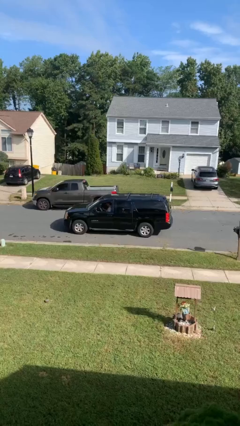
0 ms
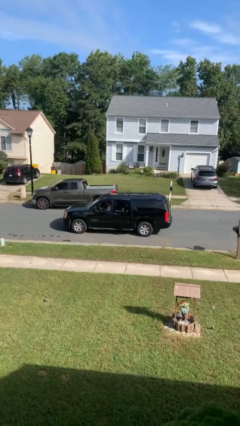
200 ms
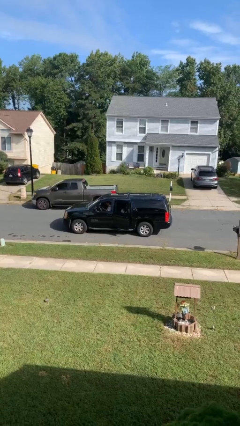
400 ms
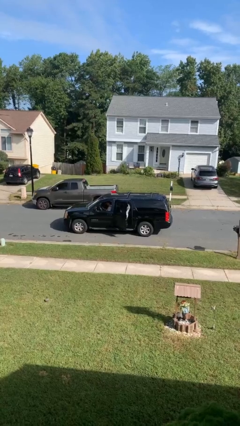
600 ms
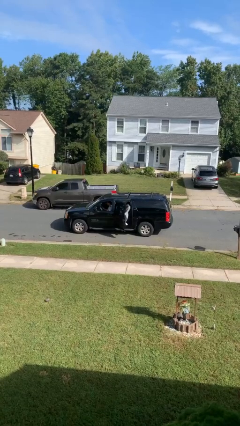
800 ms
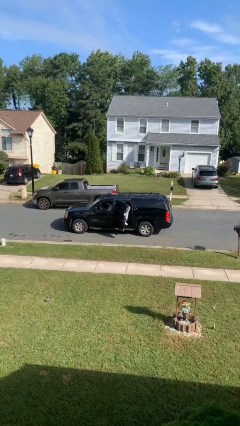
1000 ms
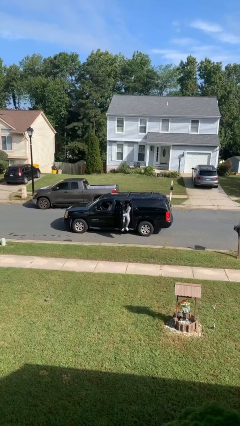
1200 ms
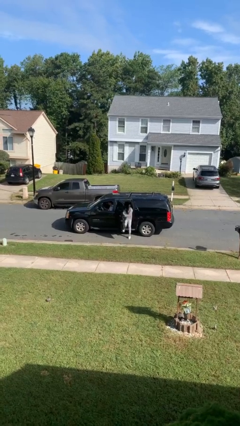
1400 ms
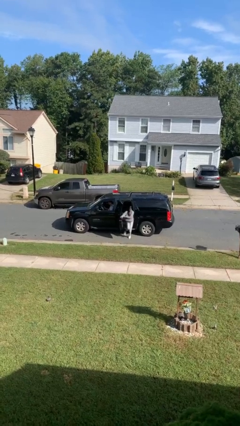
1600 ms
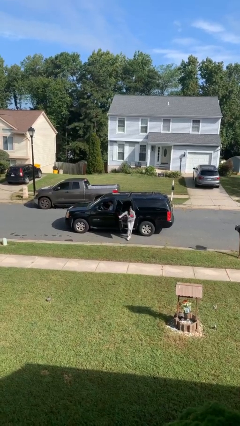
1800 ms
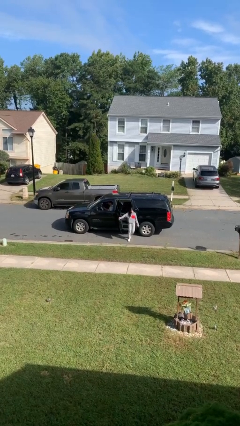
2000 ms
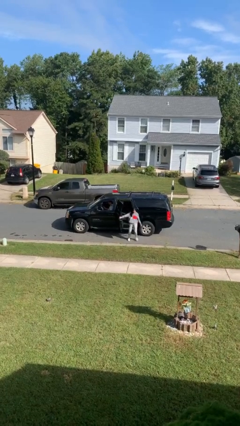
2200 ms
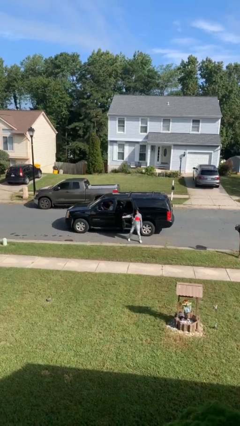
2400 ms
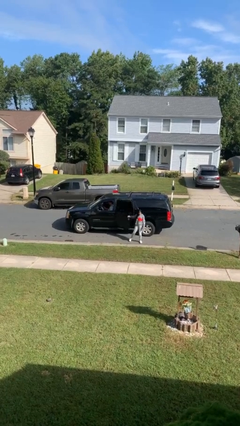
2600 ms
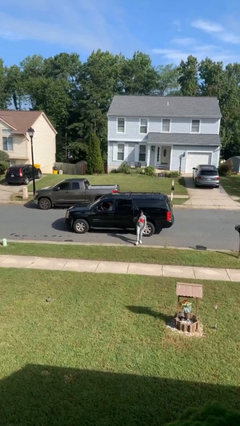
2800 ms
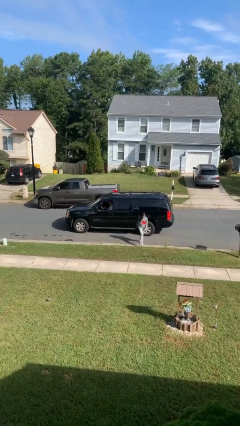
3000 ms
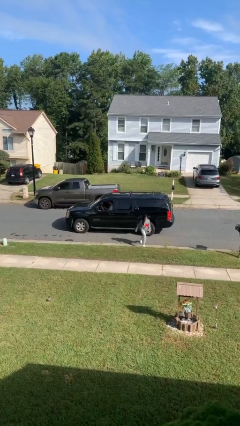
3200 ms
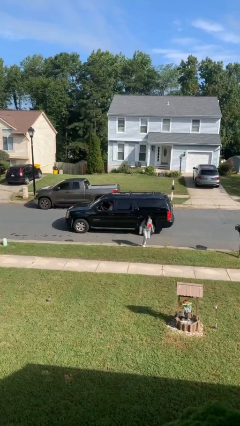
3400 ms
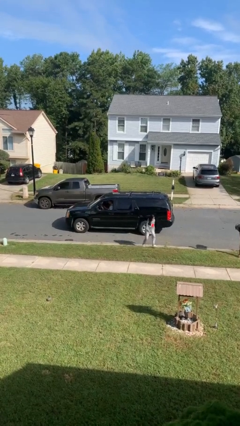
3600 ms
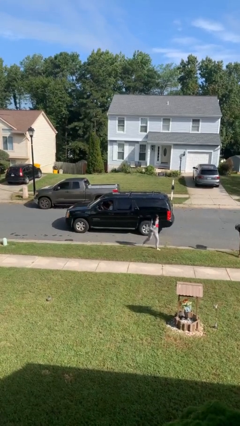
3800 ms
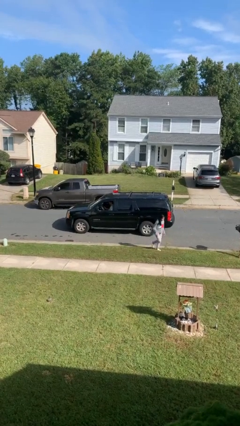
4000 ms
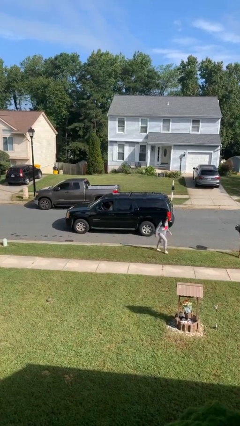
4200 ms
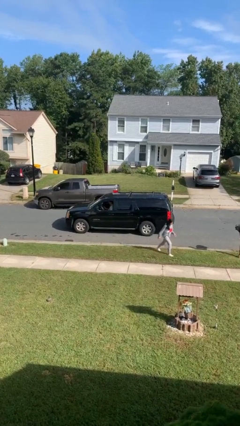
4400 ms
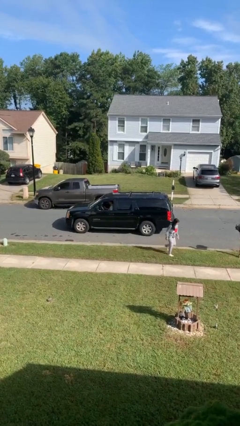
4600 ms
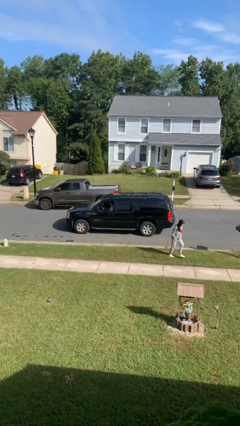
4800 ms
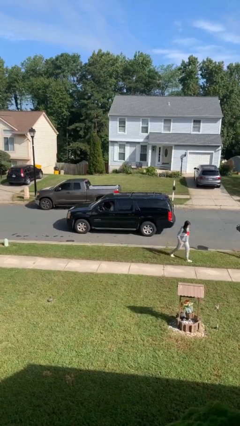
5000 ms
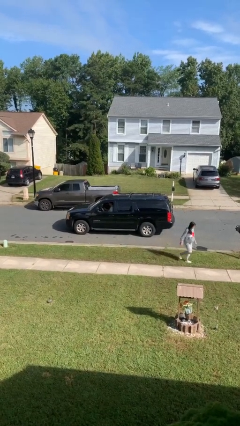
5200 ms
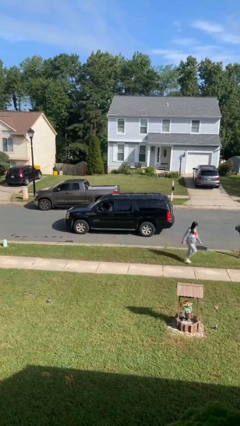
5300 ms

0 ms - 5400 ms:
car drops off person

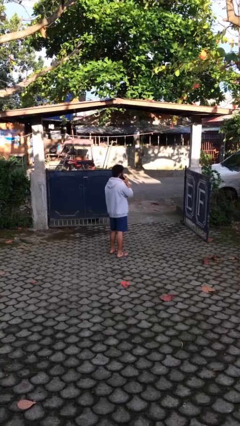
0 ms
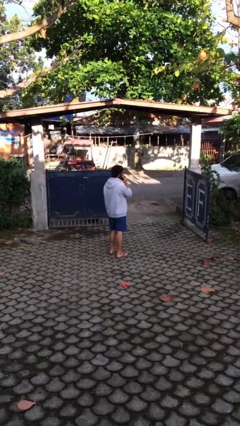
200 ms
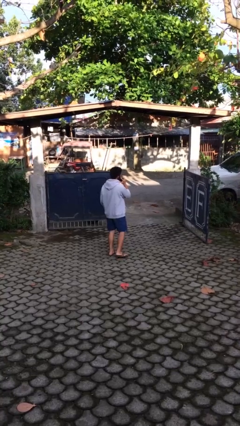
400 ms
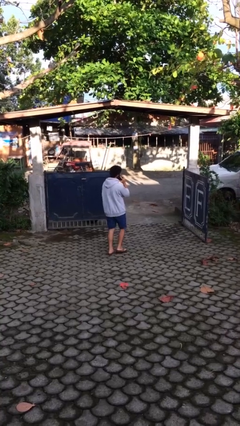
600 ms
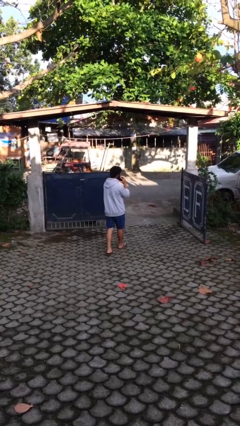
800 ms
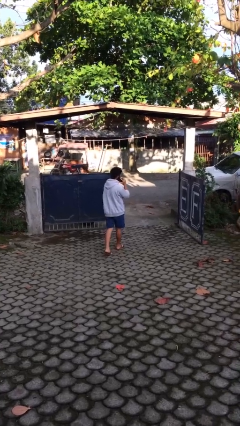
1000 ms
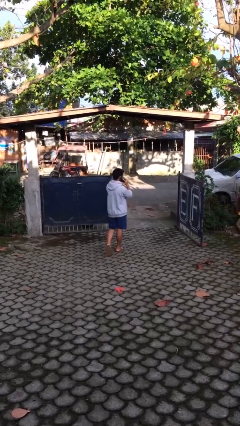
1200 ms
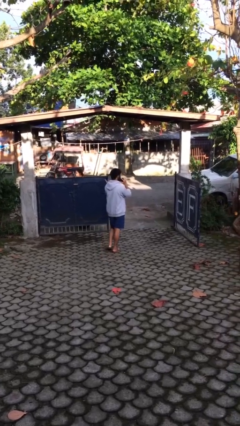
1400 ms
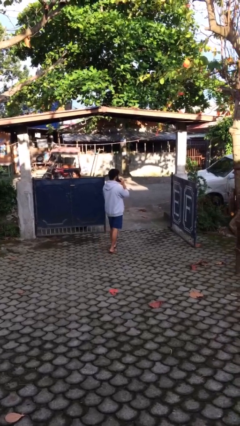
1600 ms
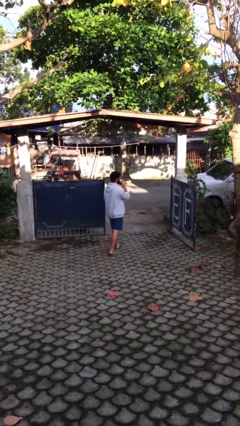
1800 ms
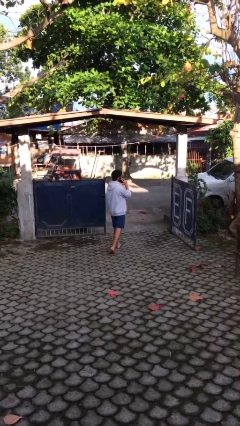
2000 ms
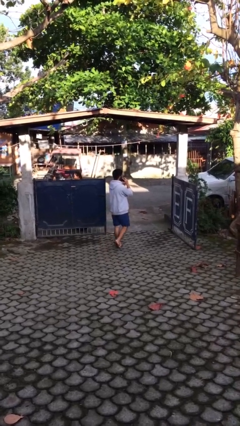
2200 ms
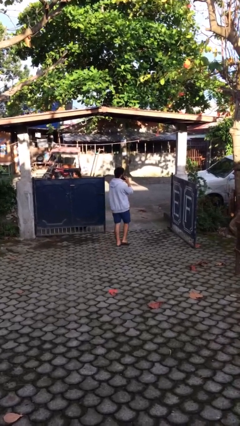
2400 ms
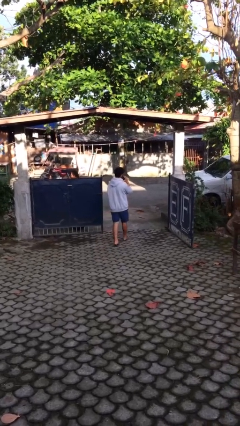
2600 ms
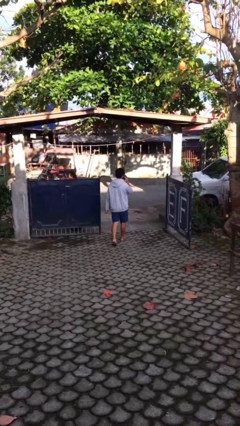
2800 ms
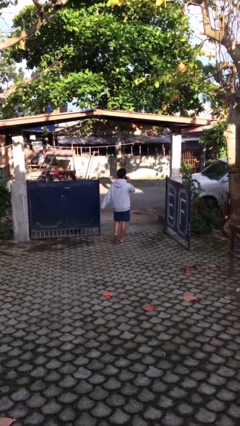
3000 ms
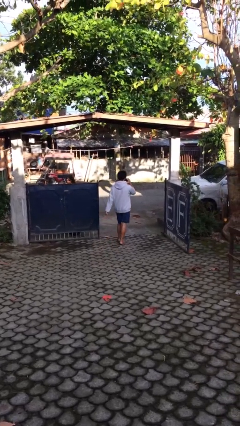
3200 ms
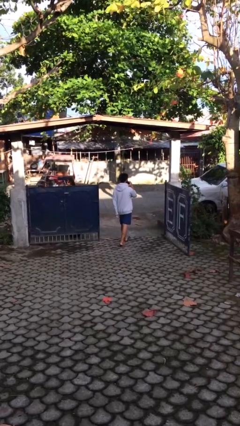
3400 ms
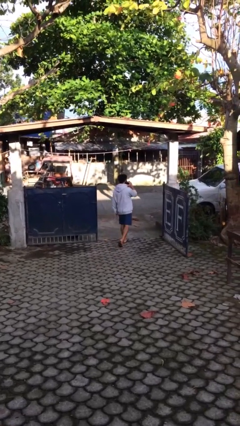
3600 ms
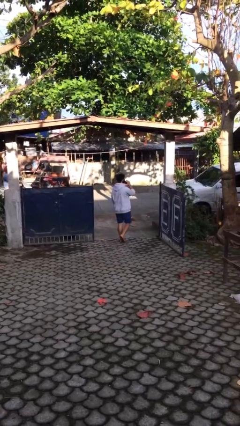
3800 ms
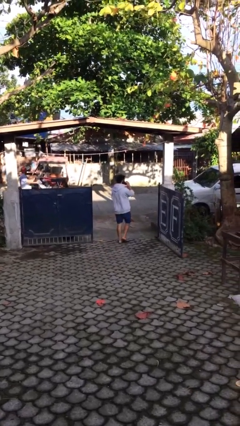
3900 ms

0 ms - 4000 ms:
person exits scene through structure

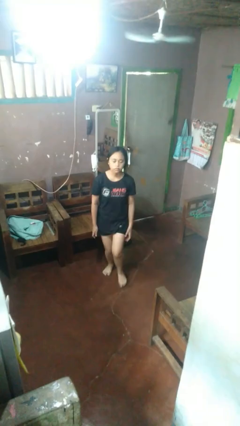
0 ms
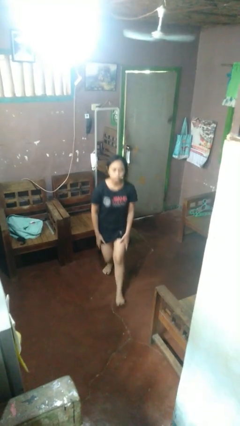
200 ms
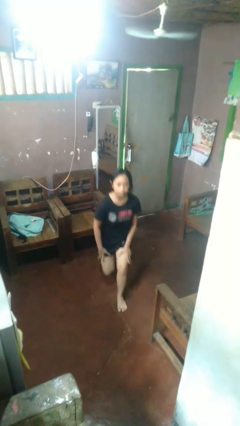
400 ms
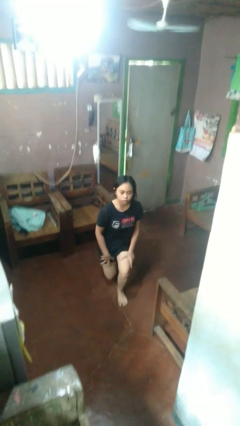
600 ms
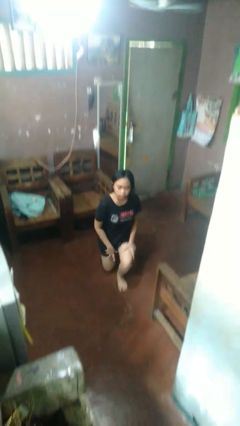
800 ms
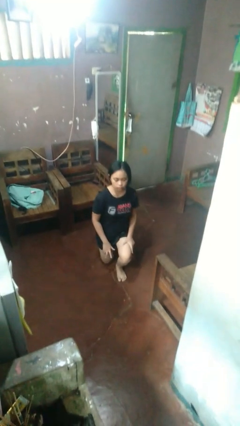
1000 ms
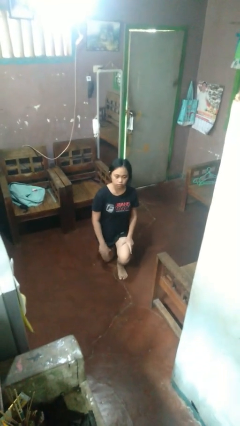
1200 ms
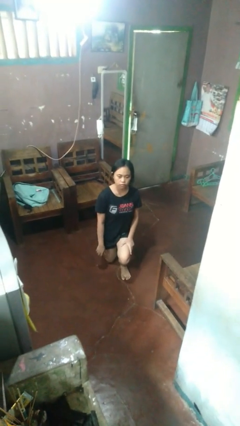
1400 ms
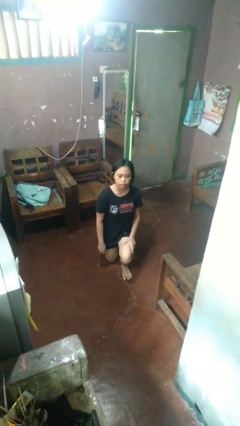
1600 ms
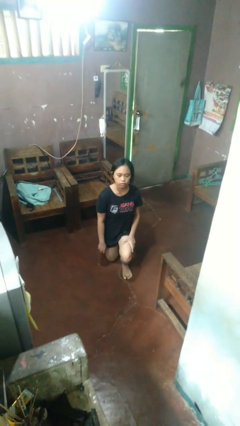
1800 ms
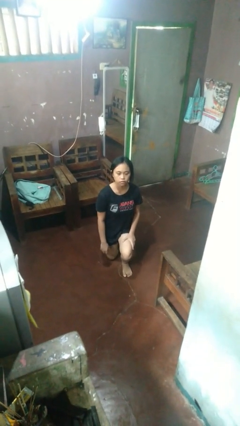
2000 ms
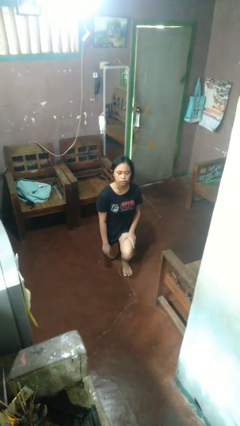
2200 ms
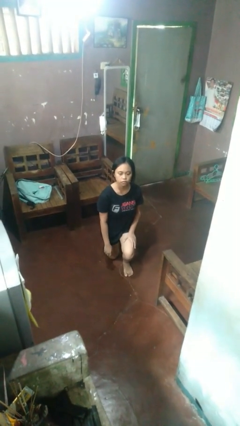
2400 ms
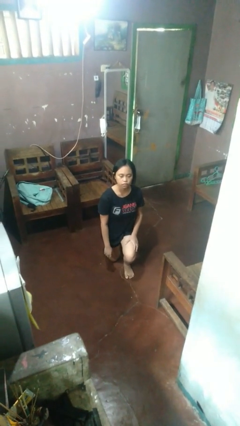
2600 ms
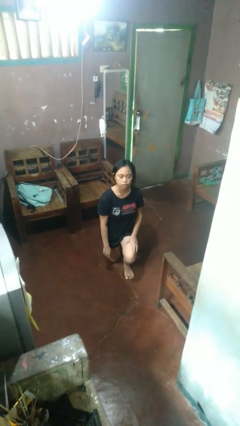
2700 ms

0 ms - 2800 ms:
person kneels

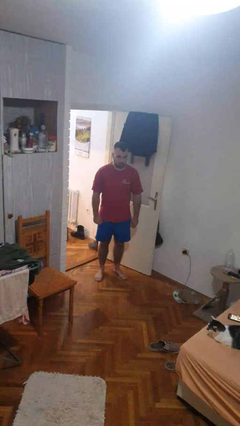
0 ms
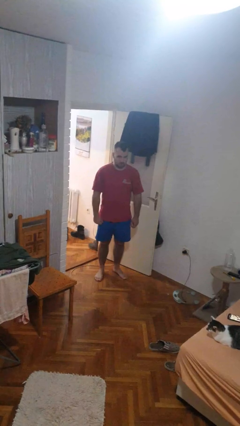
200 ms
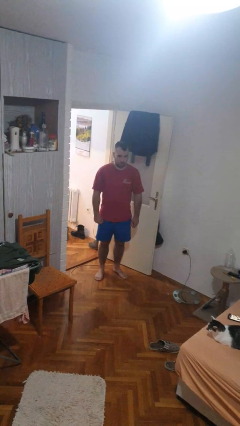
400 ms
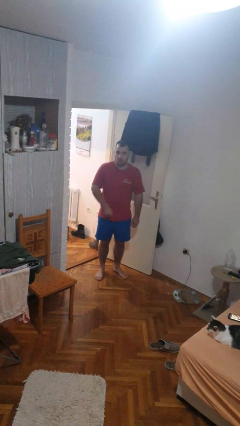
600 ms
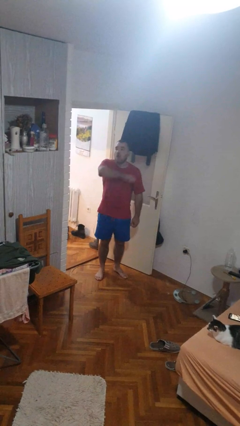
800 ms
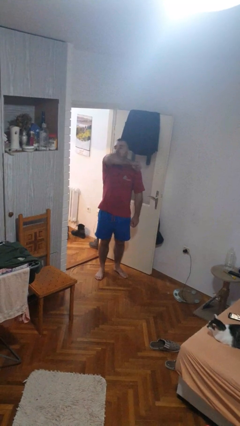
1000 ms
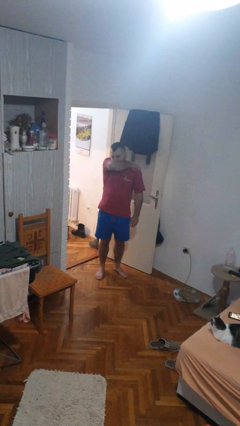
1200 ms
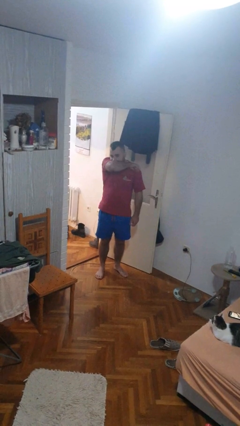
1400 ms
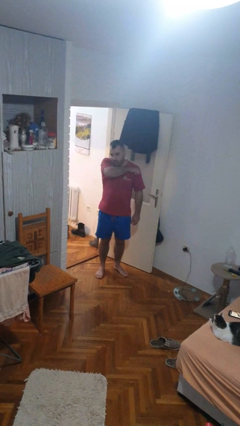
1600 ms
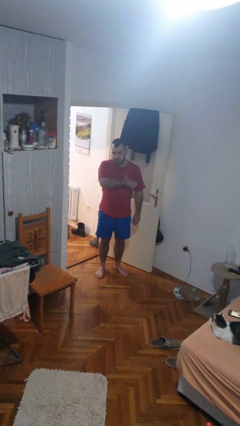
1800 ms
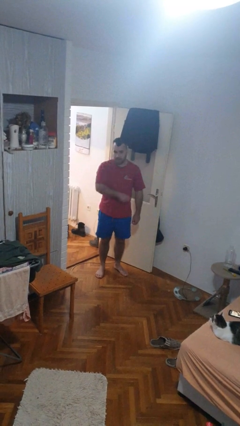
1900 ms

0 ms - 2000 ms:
person sneezes into arm

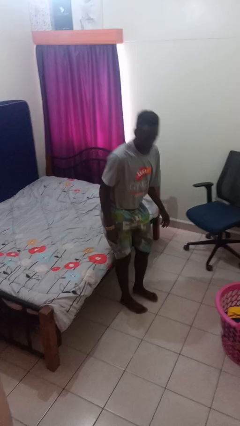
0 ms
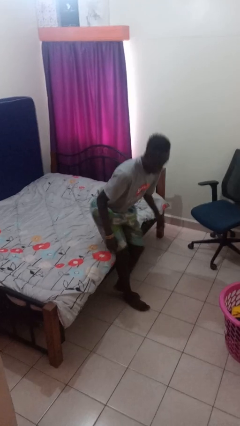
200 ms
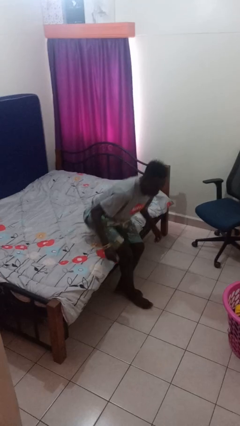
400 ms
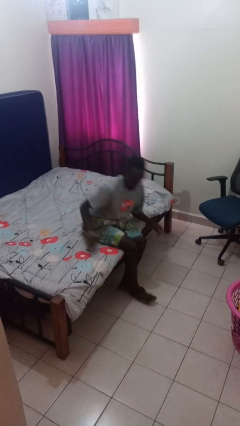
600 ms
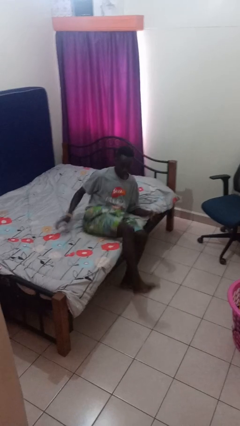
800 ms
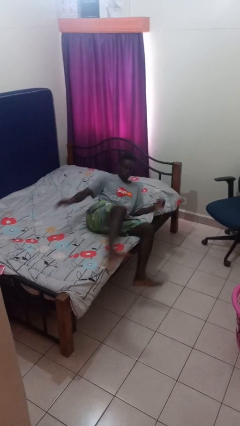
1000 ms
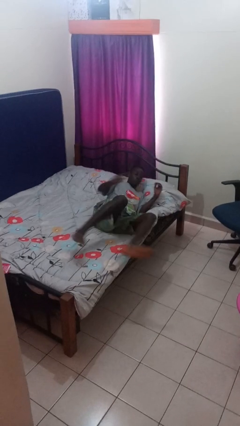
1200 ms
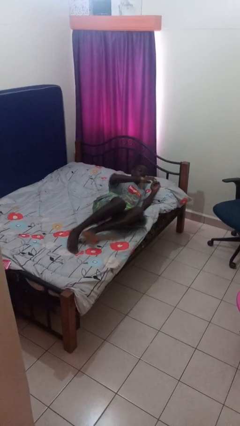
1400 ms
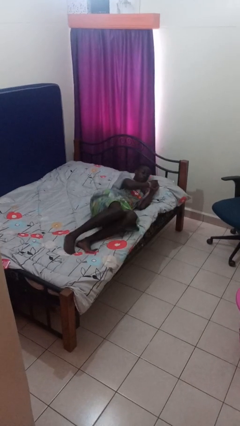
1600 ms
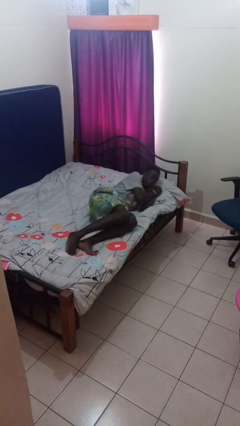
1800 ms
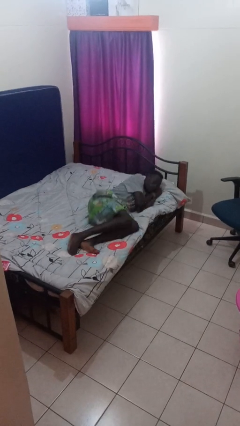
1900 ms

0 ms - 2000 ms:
person lies down on bed

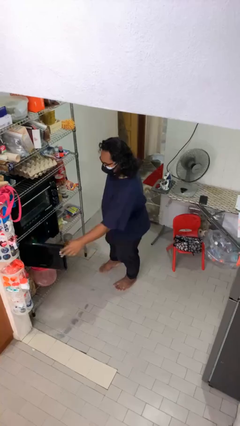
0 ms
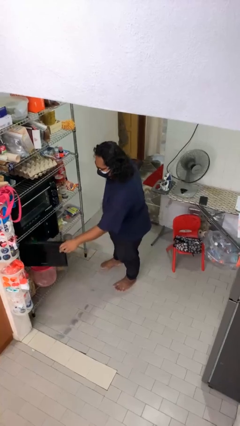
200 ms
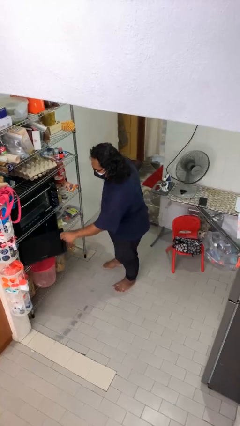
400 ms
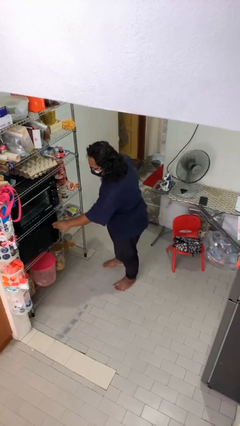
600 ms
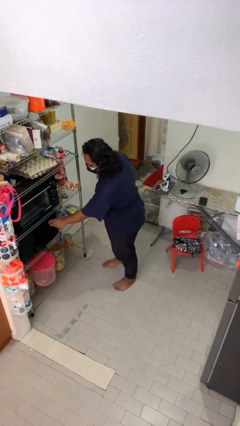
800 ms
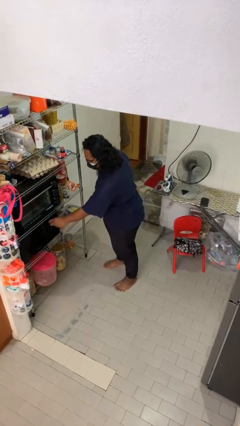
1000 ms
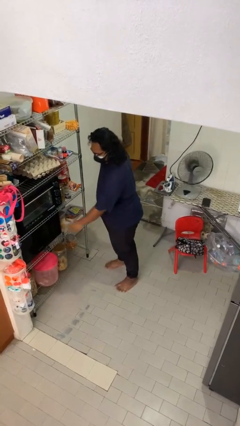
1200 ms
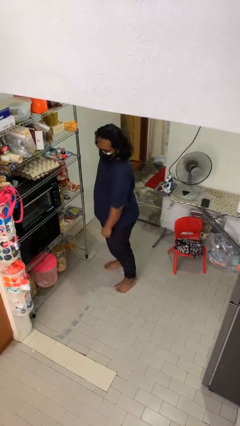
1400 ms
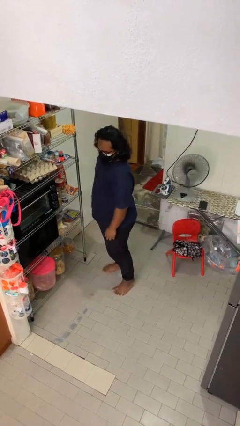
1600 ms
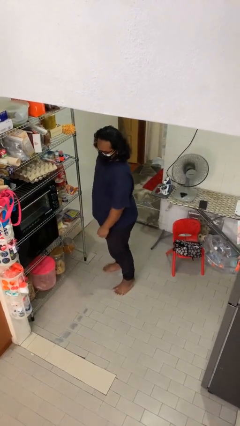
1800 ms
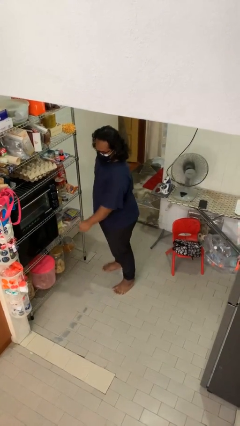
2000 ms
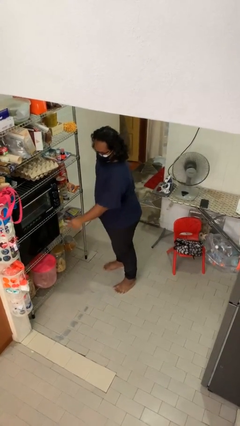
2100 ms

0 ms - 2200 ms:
person closes microwave
